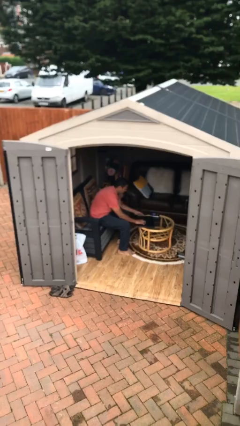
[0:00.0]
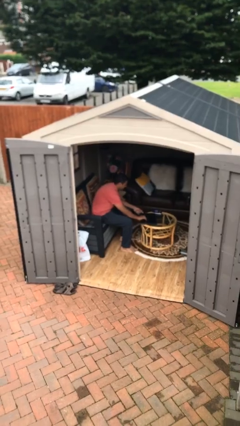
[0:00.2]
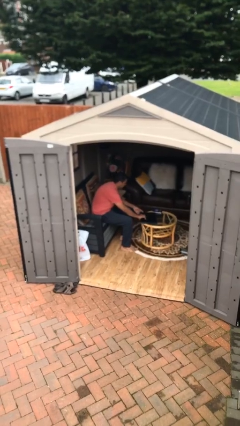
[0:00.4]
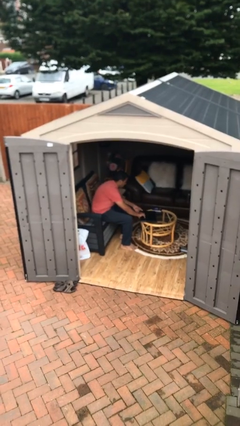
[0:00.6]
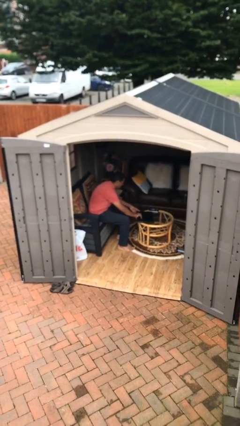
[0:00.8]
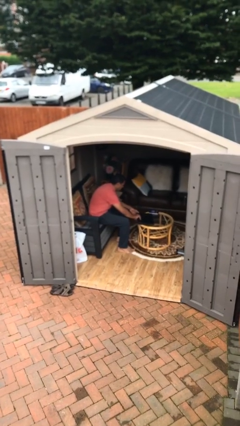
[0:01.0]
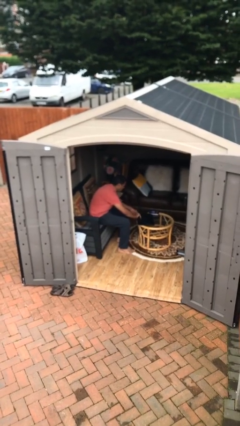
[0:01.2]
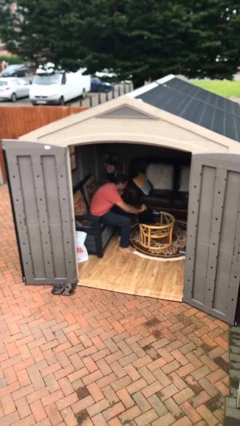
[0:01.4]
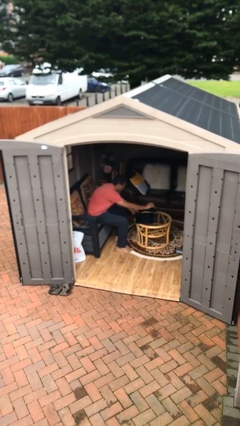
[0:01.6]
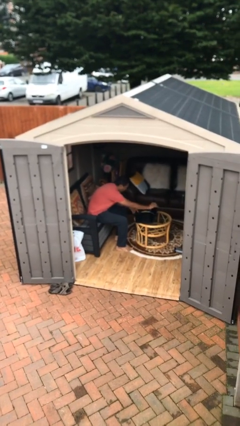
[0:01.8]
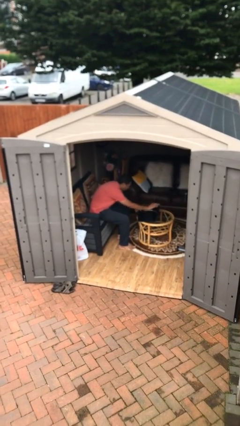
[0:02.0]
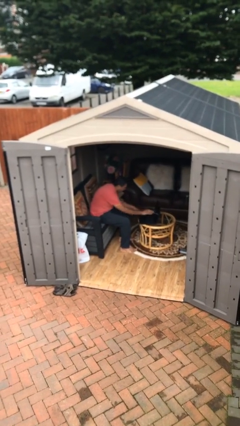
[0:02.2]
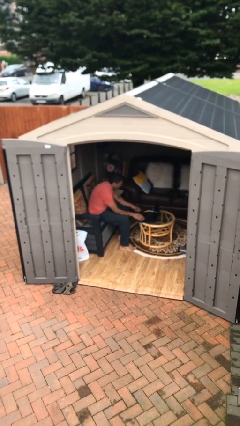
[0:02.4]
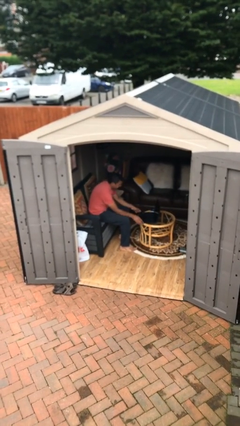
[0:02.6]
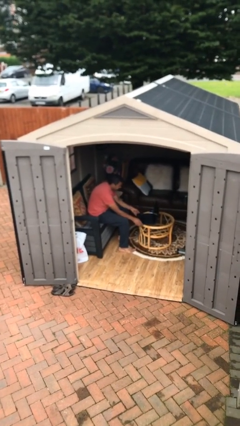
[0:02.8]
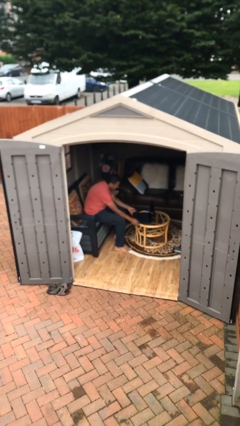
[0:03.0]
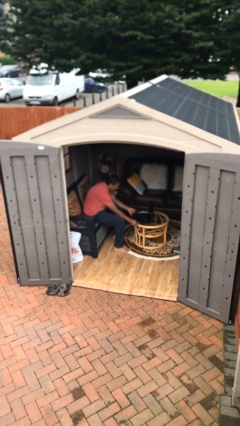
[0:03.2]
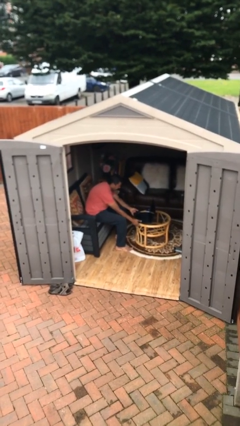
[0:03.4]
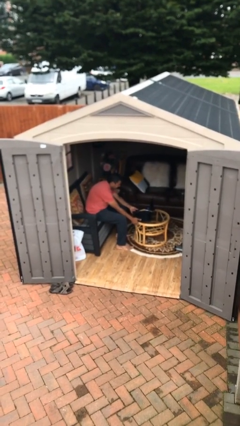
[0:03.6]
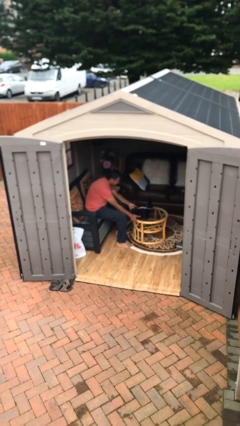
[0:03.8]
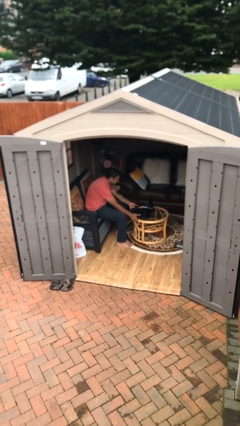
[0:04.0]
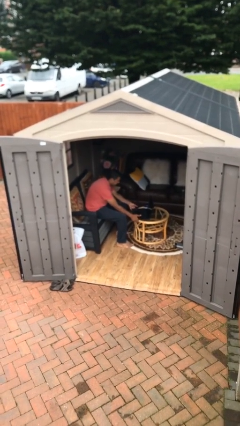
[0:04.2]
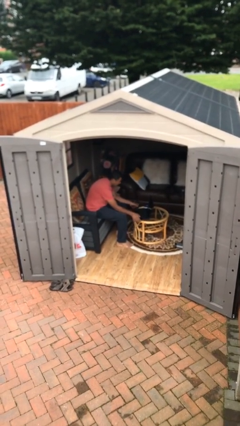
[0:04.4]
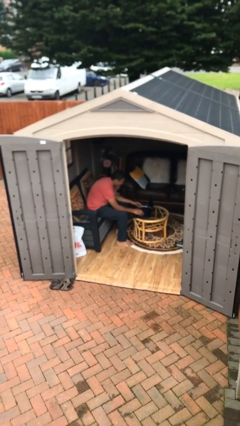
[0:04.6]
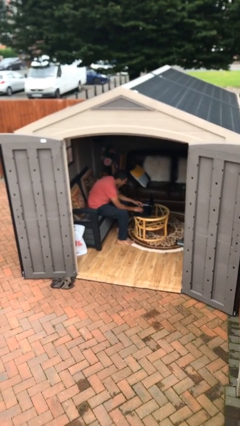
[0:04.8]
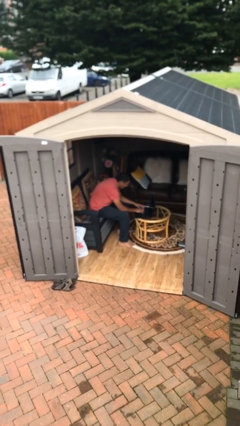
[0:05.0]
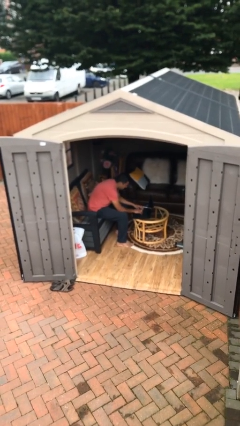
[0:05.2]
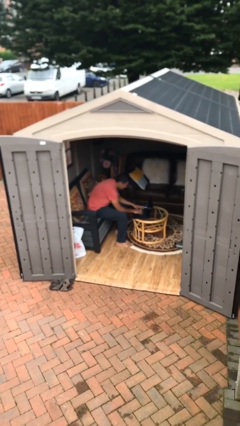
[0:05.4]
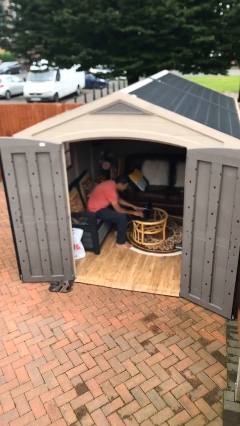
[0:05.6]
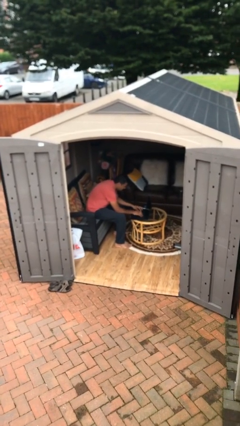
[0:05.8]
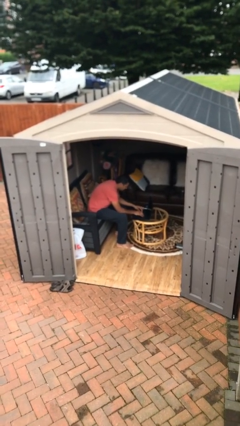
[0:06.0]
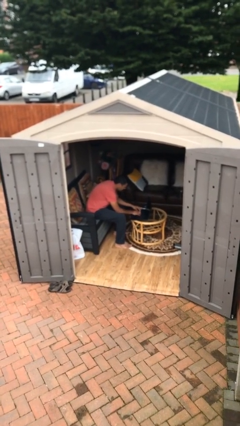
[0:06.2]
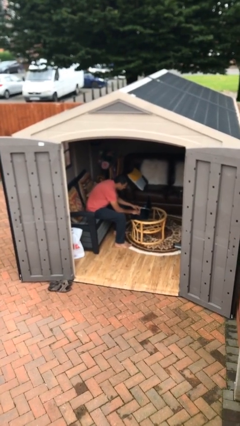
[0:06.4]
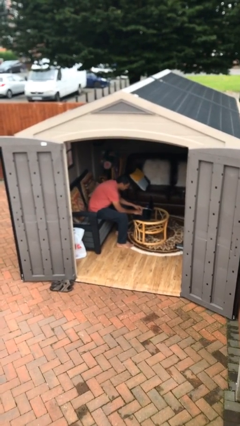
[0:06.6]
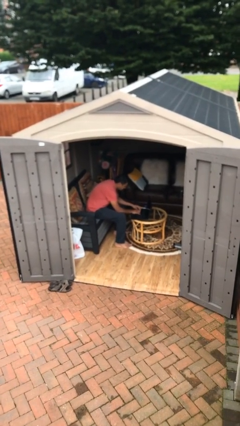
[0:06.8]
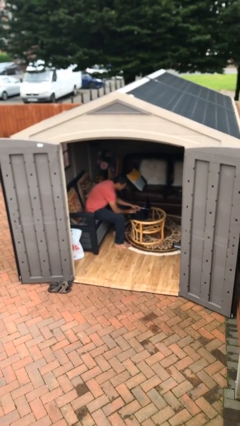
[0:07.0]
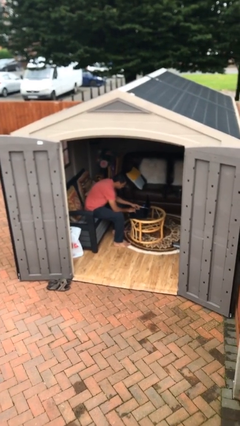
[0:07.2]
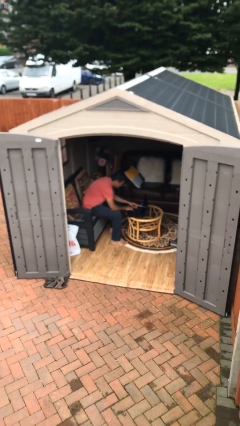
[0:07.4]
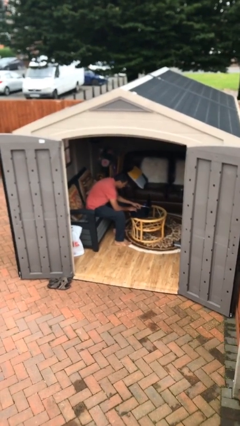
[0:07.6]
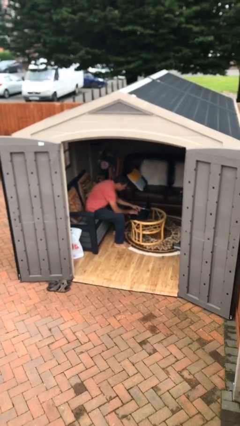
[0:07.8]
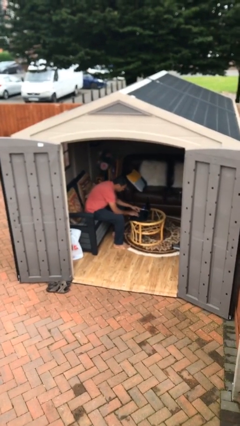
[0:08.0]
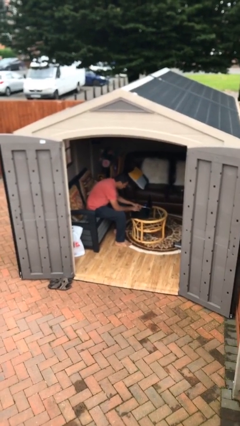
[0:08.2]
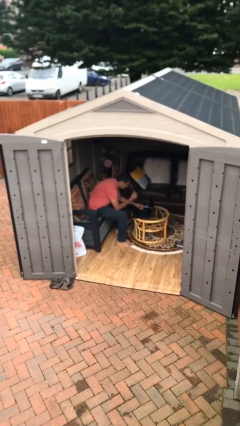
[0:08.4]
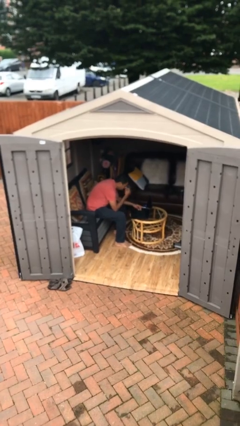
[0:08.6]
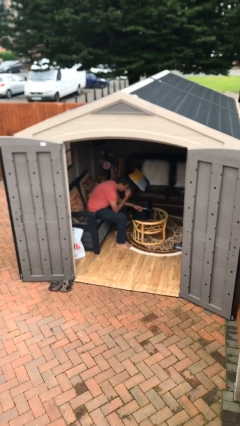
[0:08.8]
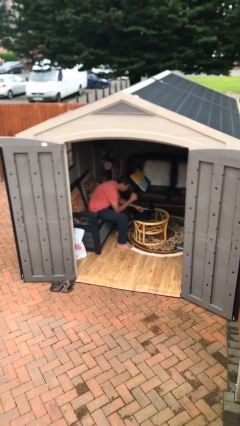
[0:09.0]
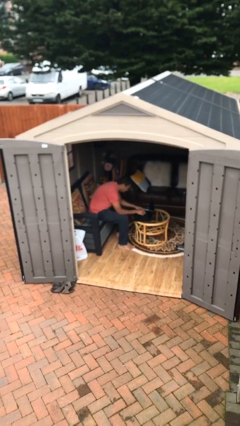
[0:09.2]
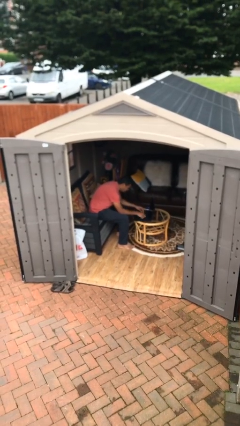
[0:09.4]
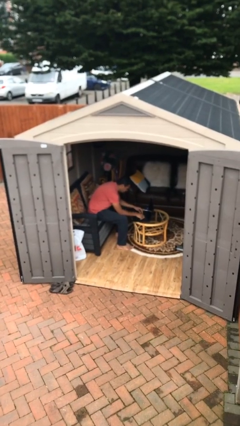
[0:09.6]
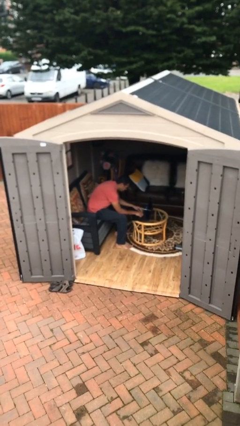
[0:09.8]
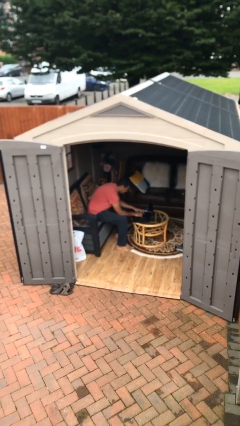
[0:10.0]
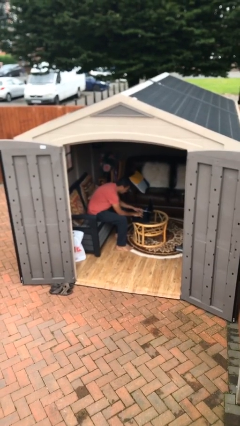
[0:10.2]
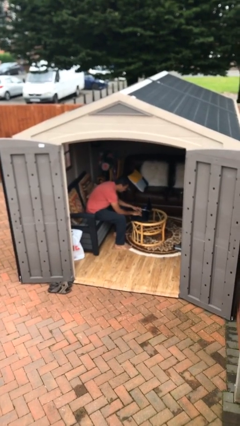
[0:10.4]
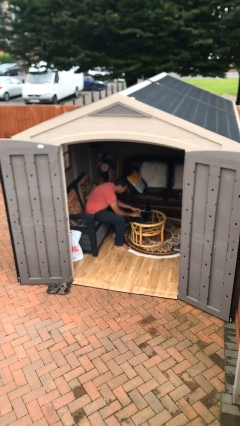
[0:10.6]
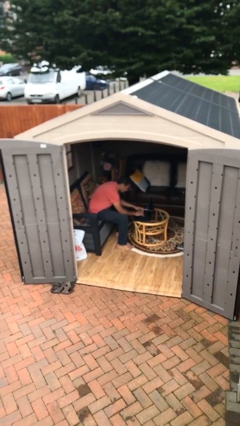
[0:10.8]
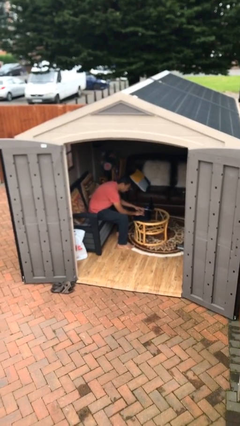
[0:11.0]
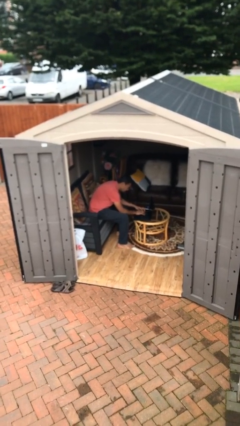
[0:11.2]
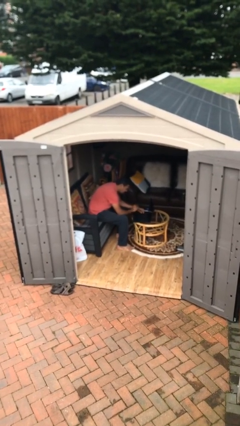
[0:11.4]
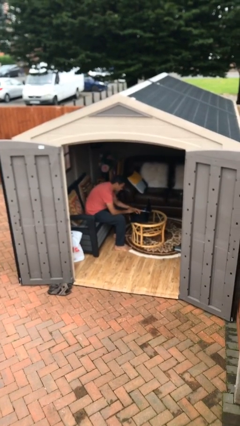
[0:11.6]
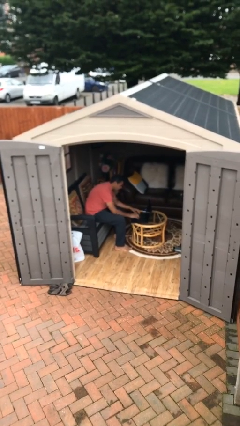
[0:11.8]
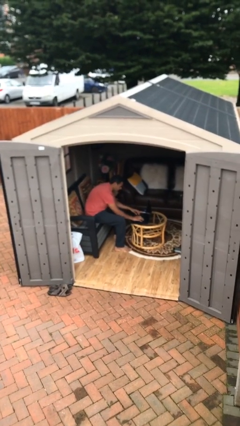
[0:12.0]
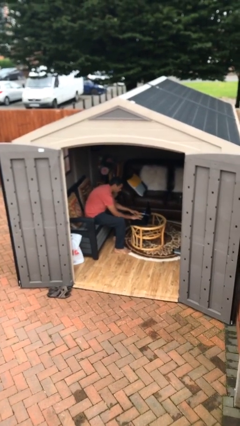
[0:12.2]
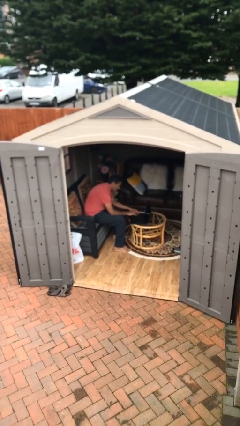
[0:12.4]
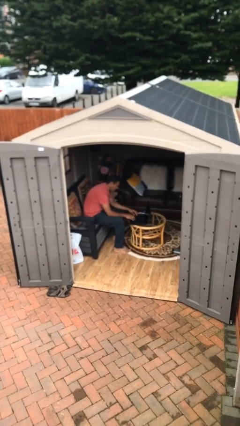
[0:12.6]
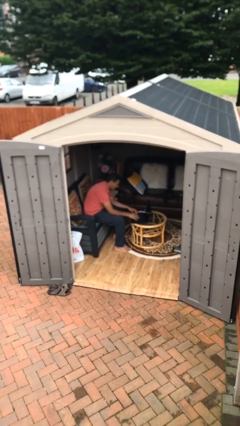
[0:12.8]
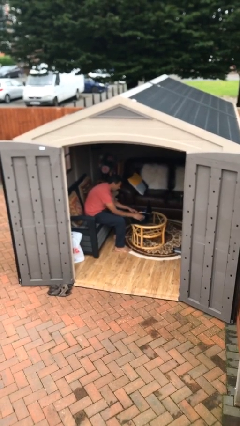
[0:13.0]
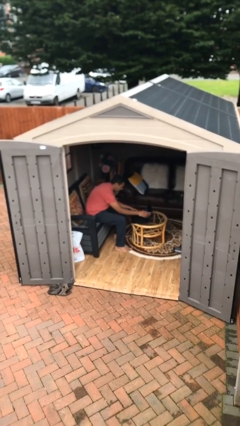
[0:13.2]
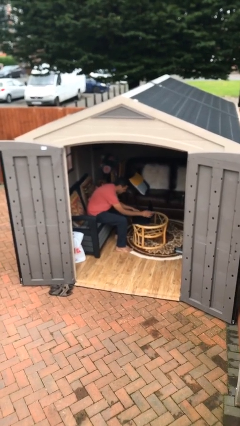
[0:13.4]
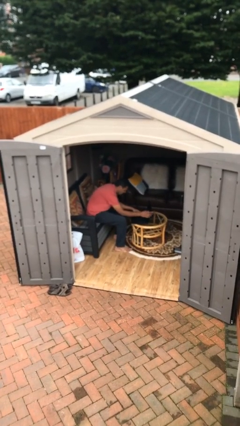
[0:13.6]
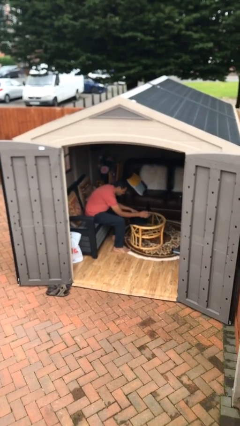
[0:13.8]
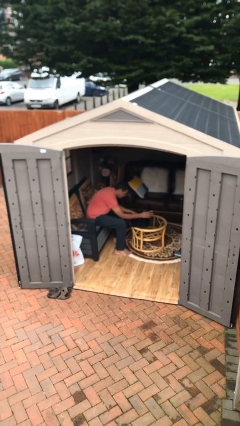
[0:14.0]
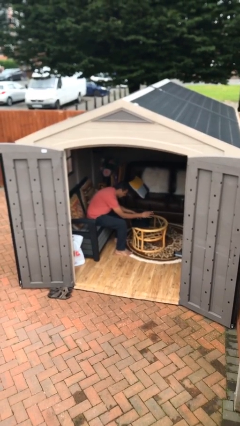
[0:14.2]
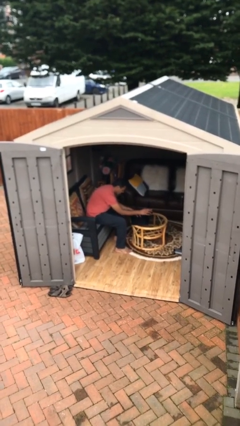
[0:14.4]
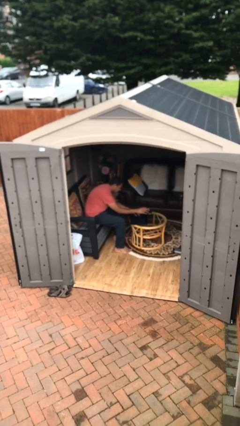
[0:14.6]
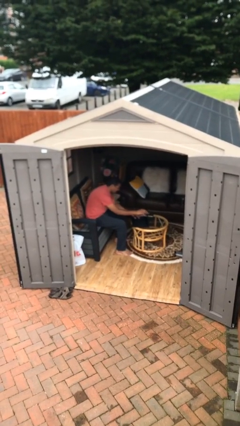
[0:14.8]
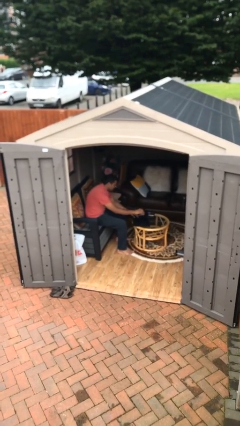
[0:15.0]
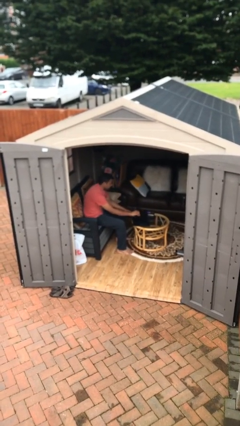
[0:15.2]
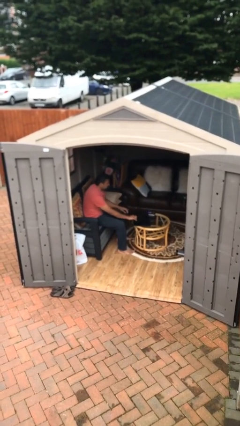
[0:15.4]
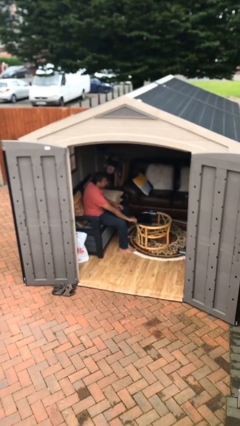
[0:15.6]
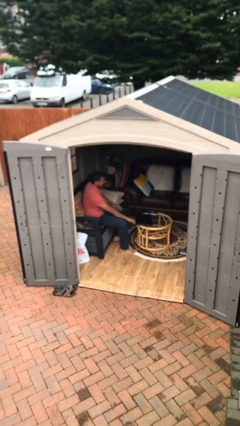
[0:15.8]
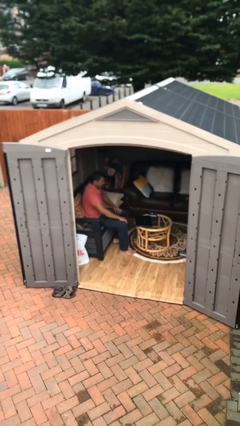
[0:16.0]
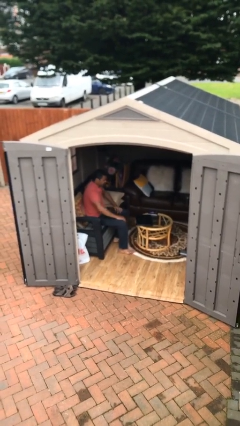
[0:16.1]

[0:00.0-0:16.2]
person interacts with laptop

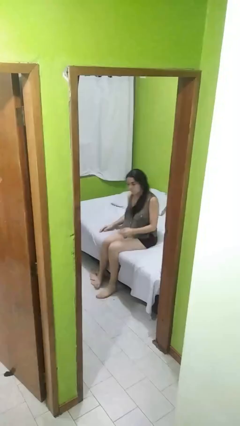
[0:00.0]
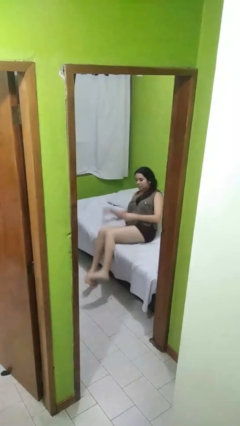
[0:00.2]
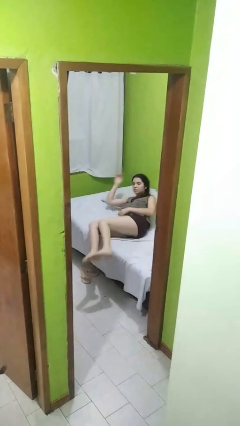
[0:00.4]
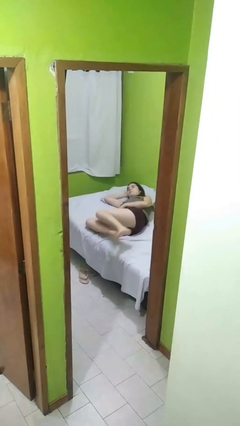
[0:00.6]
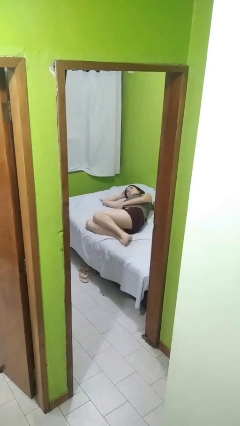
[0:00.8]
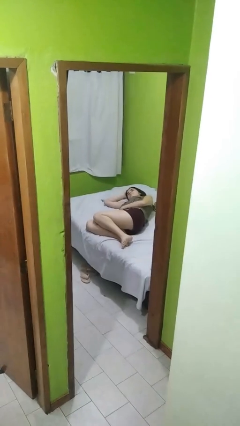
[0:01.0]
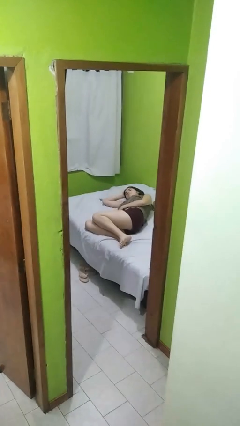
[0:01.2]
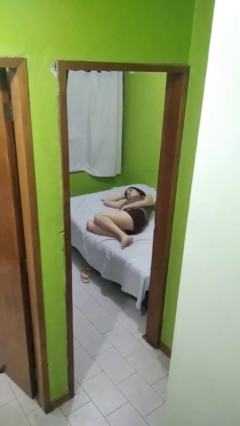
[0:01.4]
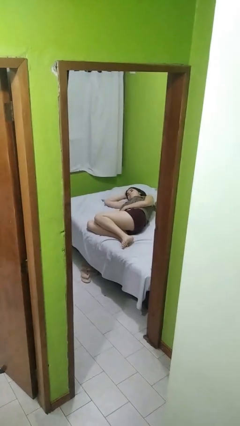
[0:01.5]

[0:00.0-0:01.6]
person lies down on bed

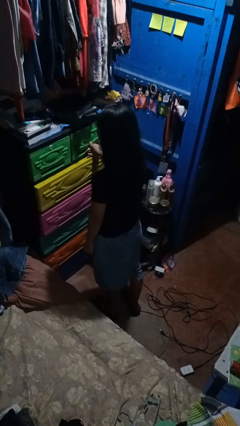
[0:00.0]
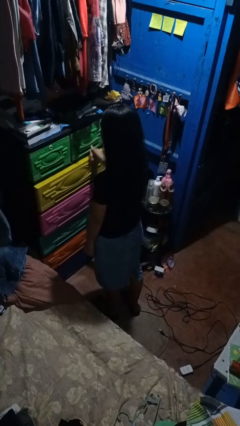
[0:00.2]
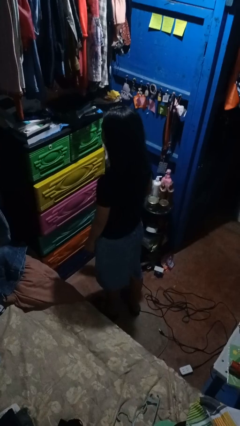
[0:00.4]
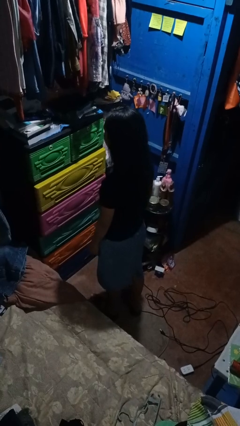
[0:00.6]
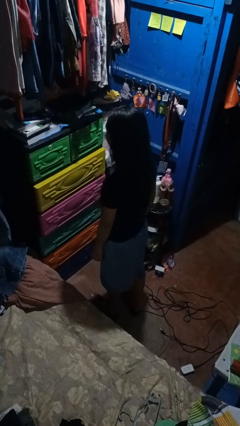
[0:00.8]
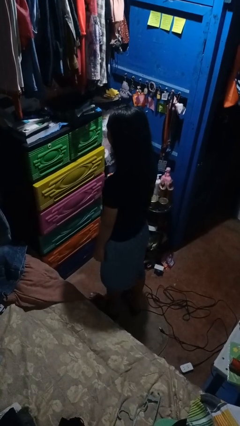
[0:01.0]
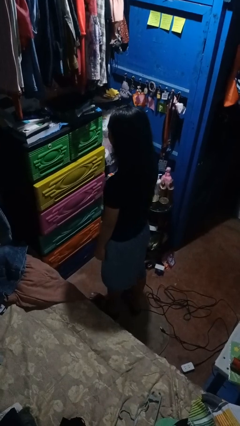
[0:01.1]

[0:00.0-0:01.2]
person closes dresser drawer
